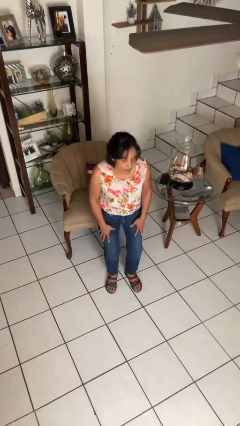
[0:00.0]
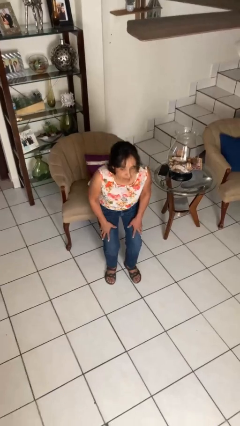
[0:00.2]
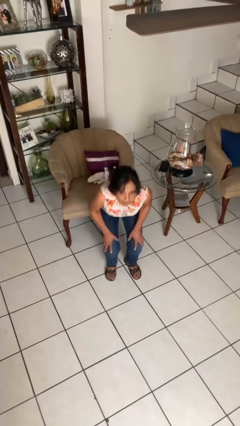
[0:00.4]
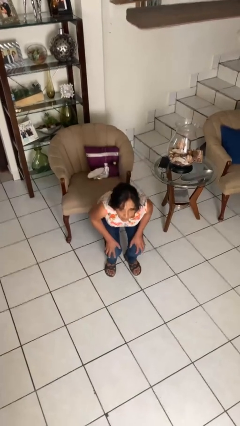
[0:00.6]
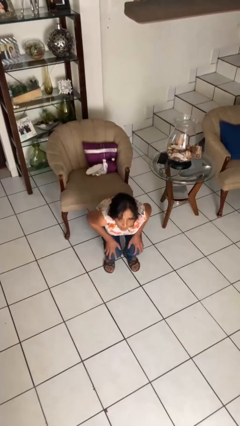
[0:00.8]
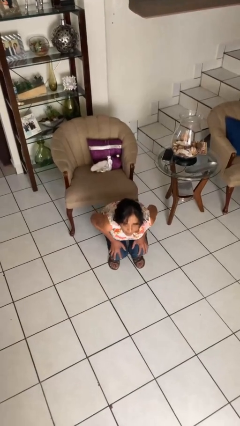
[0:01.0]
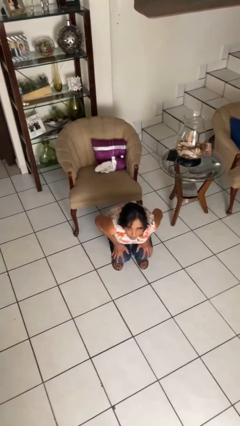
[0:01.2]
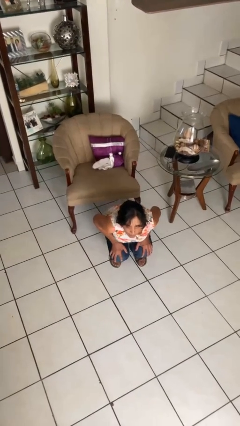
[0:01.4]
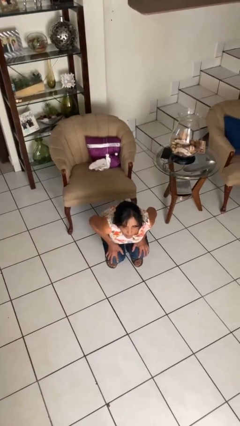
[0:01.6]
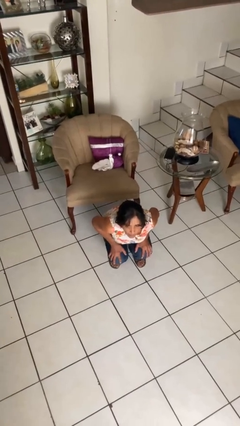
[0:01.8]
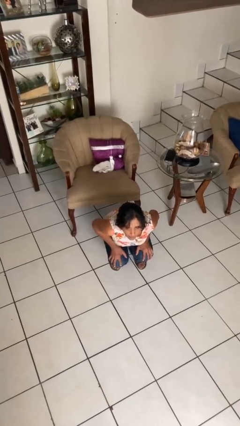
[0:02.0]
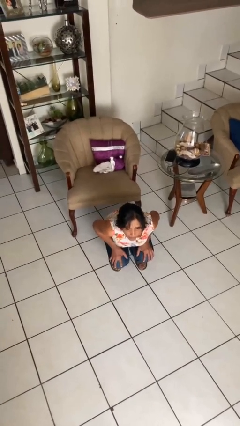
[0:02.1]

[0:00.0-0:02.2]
person squats

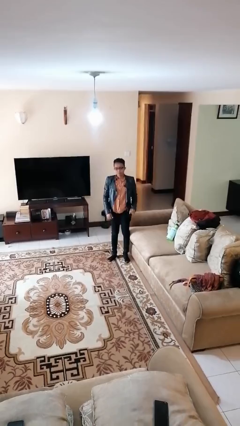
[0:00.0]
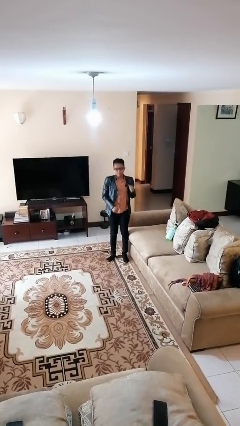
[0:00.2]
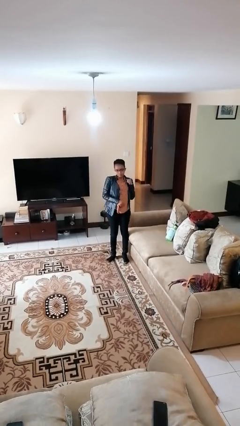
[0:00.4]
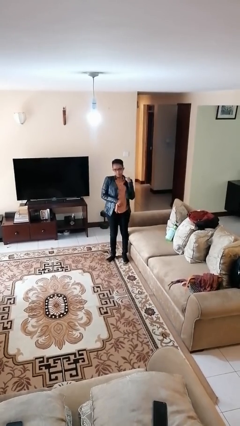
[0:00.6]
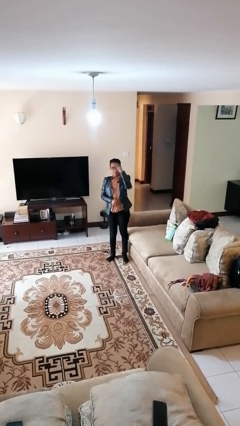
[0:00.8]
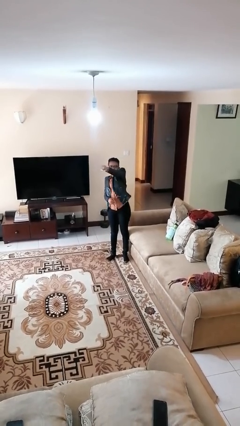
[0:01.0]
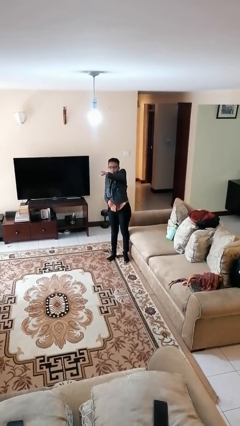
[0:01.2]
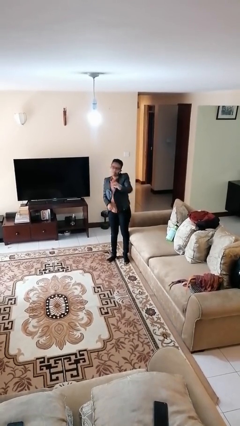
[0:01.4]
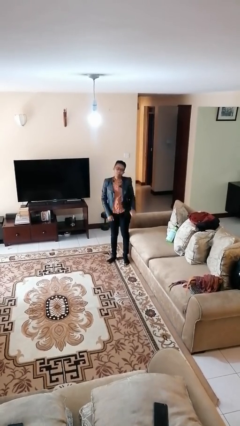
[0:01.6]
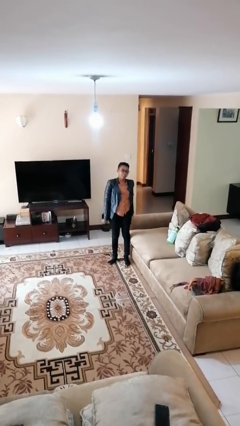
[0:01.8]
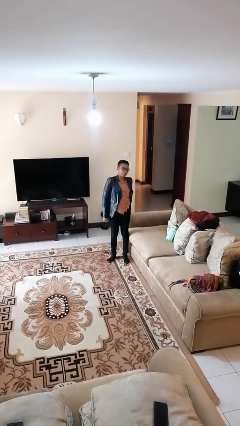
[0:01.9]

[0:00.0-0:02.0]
person punches

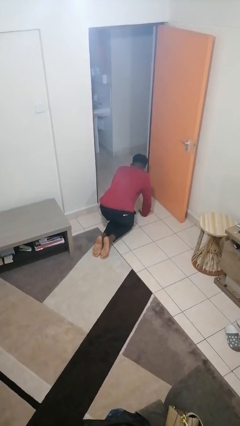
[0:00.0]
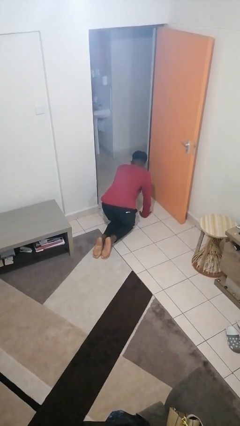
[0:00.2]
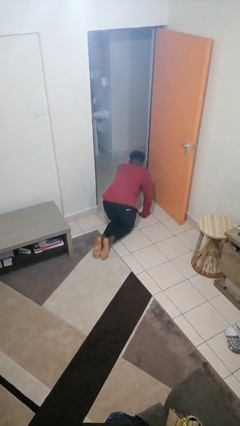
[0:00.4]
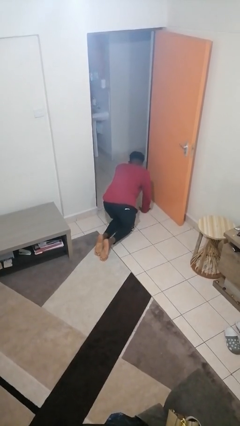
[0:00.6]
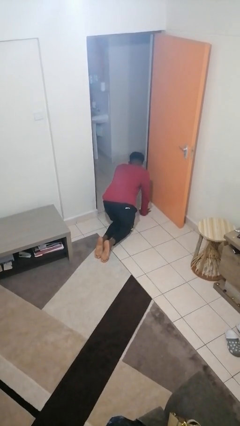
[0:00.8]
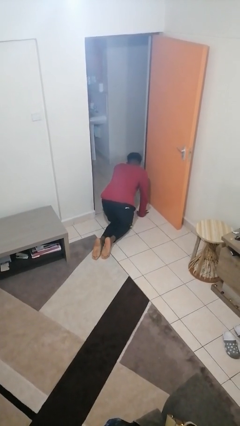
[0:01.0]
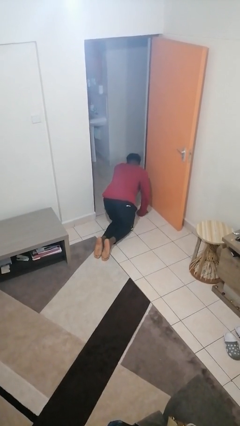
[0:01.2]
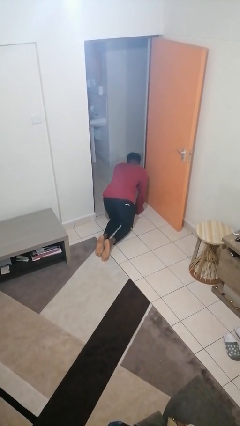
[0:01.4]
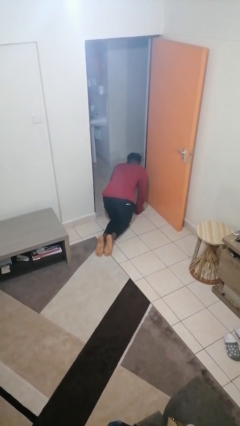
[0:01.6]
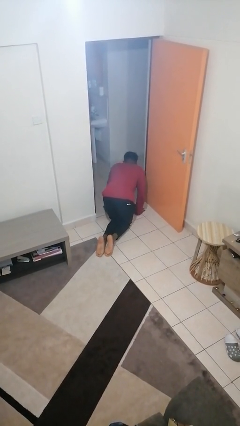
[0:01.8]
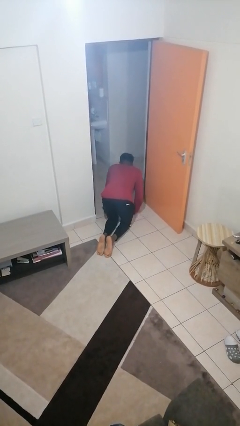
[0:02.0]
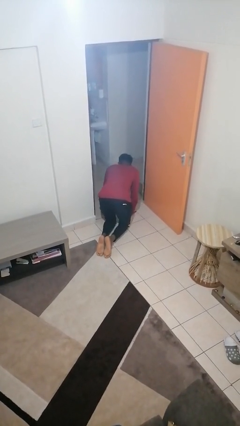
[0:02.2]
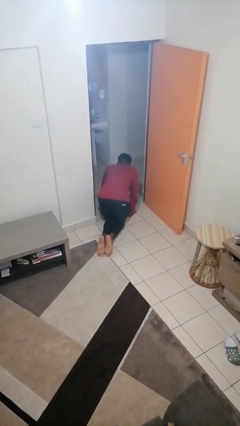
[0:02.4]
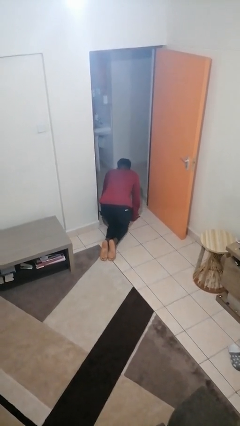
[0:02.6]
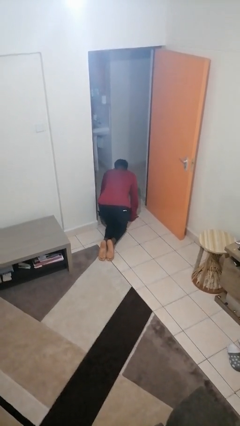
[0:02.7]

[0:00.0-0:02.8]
person crawls

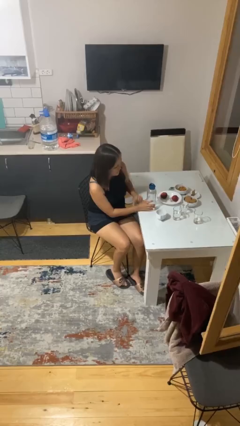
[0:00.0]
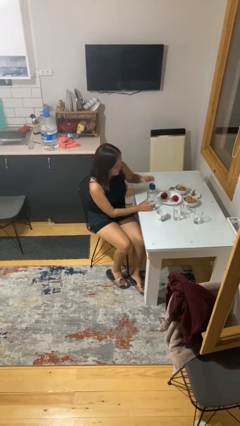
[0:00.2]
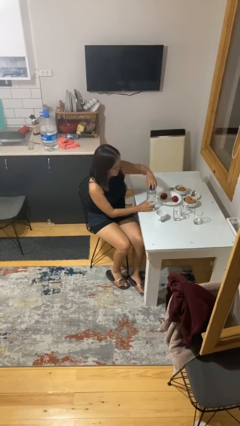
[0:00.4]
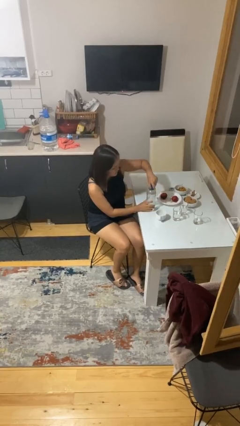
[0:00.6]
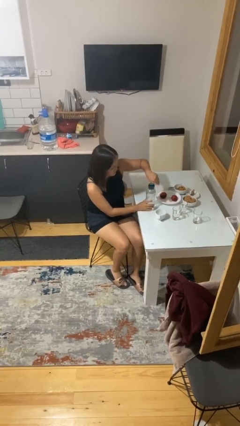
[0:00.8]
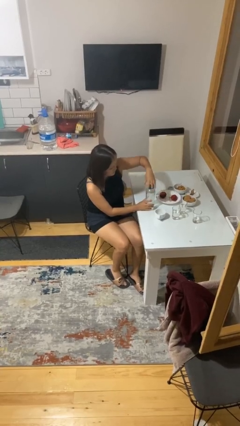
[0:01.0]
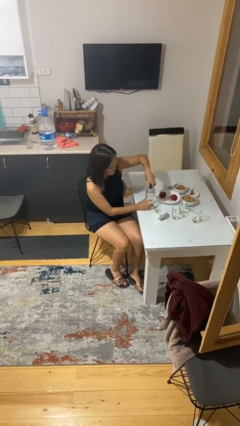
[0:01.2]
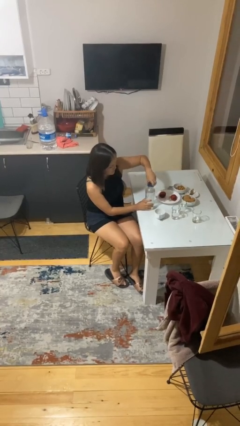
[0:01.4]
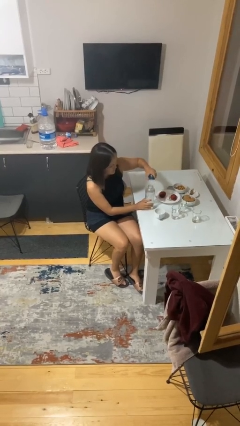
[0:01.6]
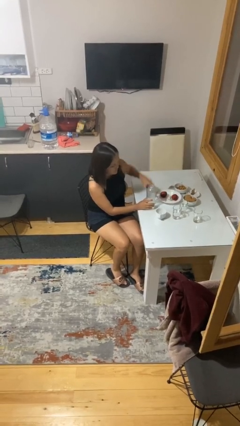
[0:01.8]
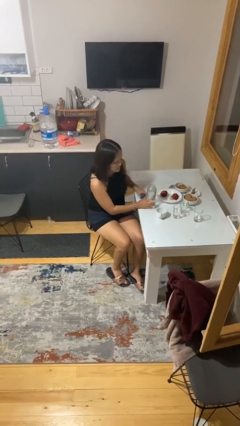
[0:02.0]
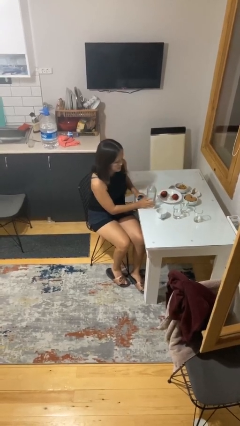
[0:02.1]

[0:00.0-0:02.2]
person unscrews lid from bottle

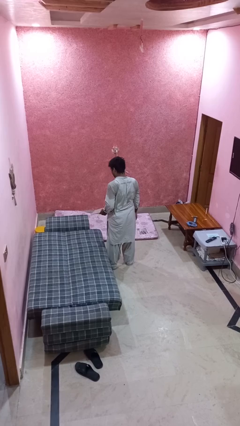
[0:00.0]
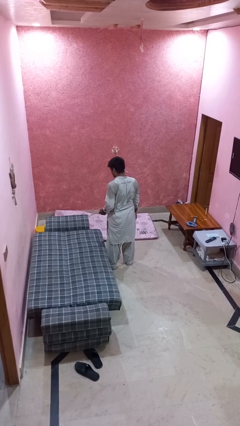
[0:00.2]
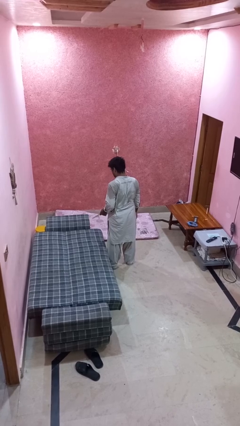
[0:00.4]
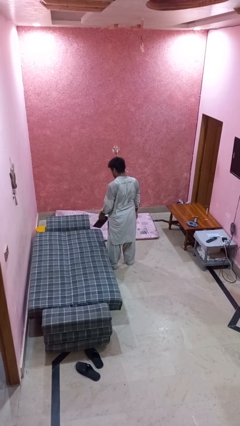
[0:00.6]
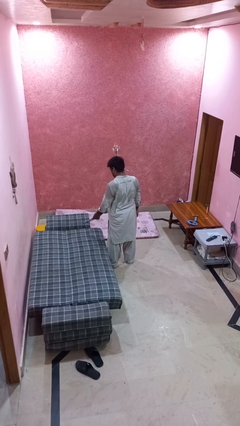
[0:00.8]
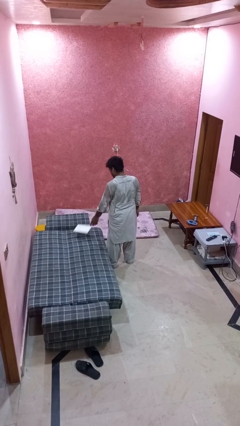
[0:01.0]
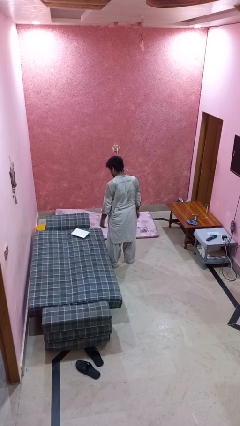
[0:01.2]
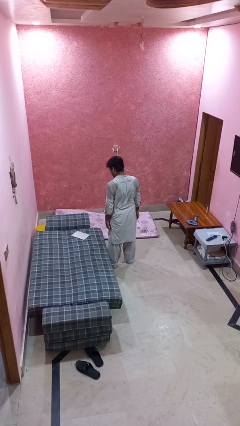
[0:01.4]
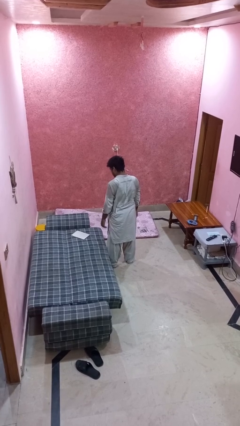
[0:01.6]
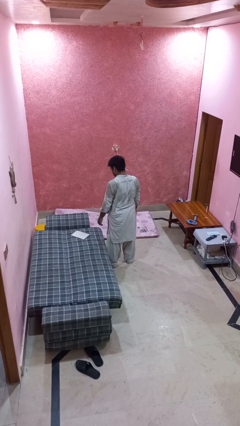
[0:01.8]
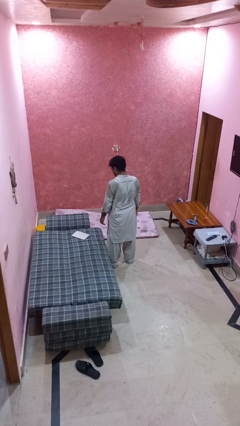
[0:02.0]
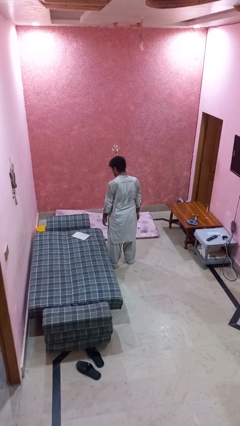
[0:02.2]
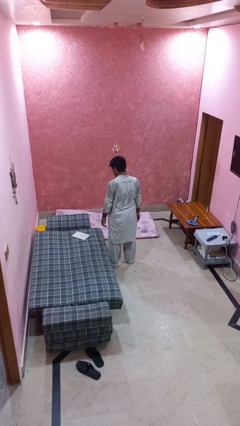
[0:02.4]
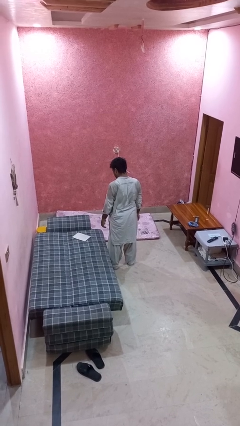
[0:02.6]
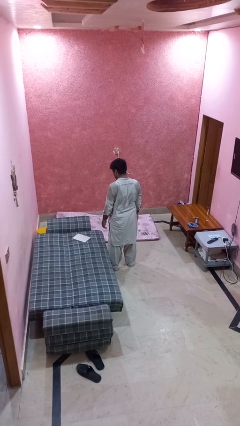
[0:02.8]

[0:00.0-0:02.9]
person throws object on bed

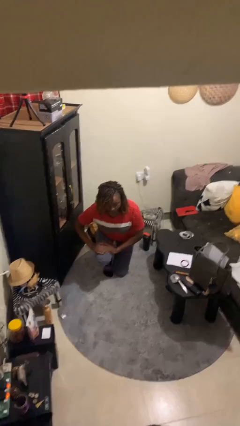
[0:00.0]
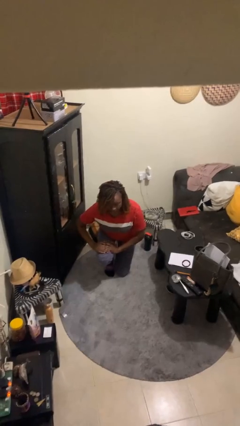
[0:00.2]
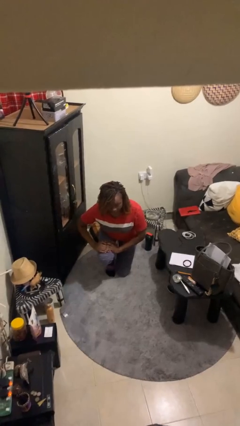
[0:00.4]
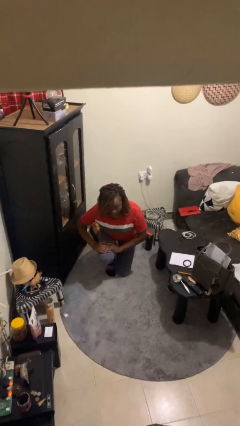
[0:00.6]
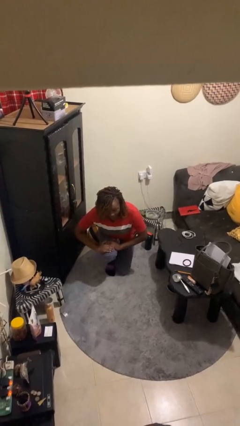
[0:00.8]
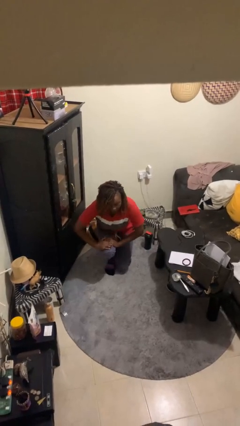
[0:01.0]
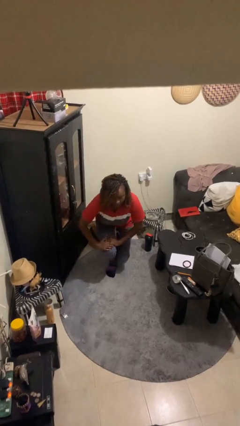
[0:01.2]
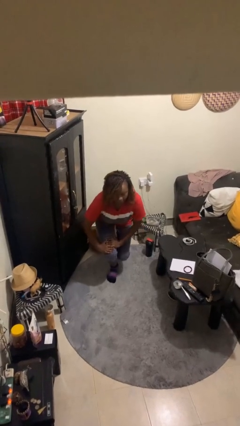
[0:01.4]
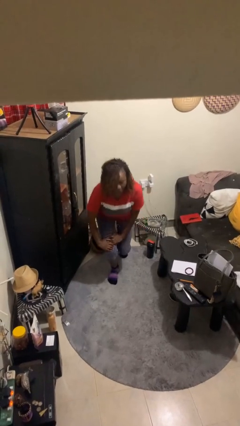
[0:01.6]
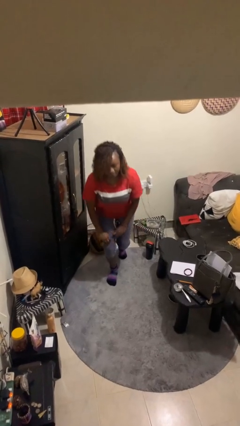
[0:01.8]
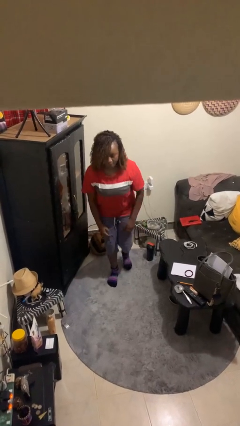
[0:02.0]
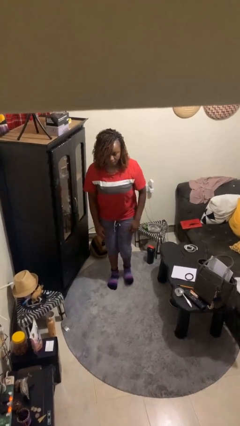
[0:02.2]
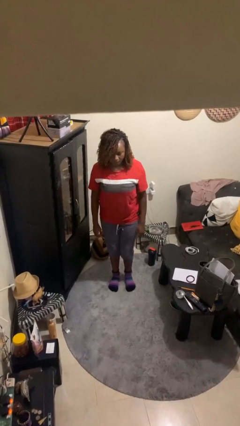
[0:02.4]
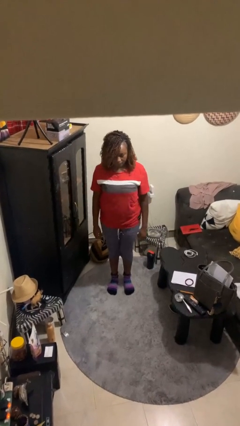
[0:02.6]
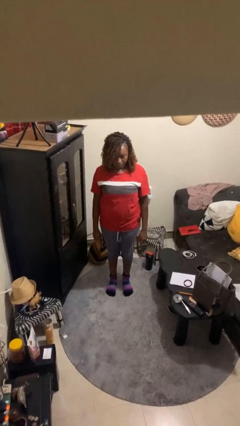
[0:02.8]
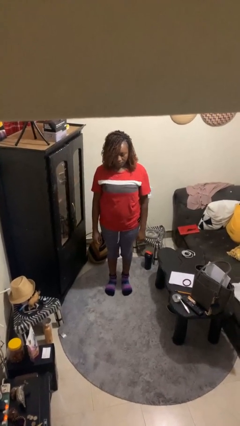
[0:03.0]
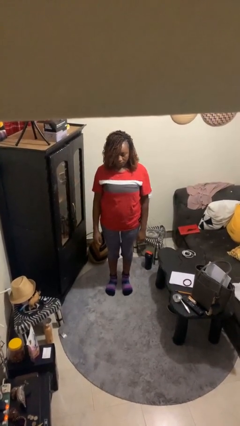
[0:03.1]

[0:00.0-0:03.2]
person stands up from floor

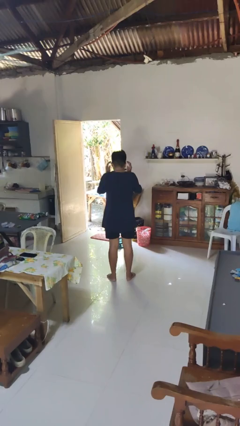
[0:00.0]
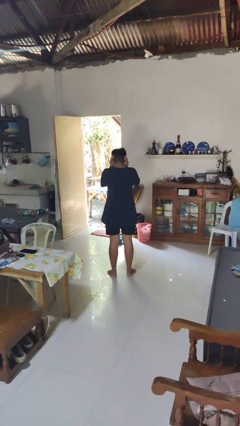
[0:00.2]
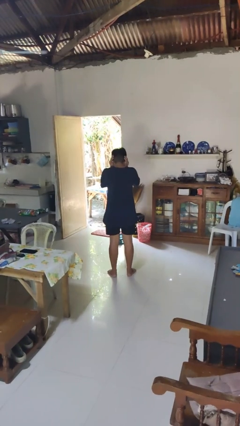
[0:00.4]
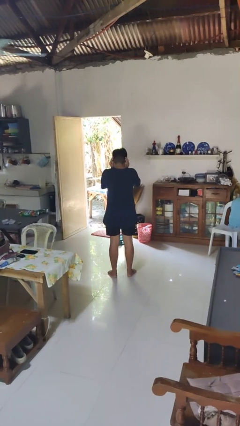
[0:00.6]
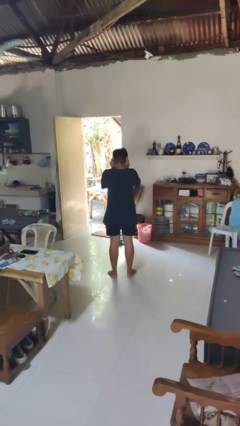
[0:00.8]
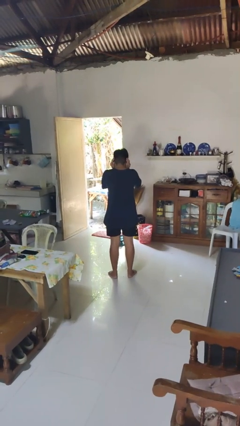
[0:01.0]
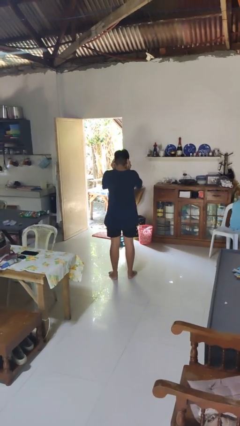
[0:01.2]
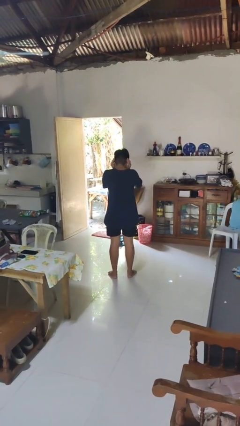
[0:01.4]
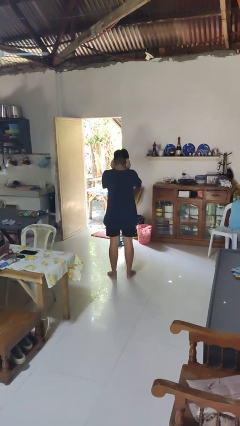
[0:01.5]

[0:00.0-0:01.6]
person puts fingers in ear

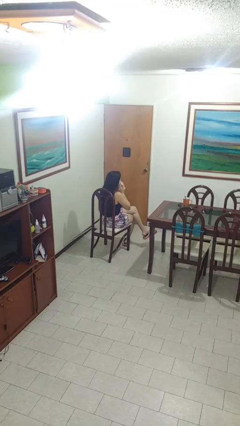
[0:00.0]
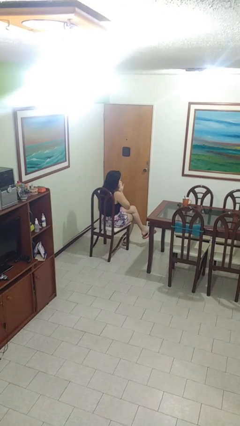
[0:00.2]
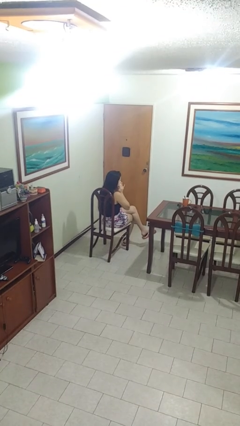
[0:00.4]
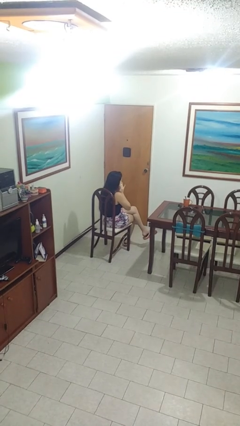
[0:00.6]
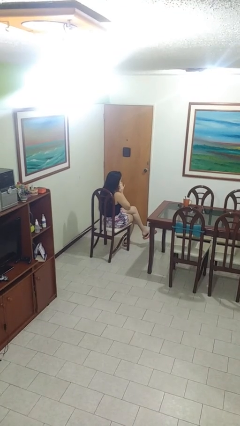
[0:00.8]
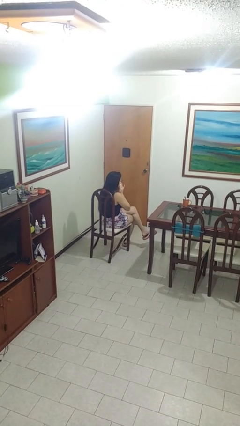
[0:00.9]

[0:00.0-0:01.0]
person blows nose
